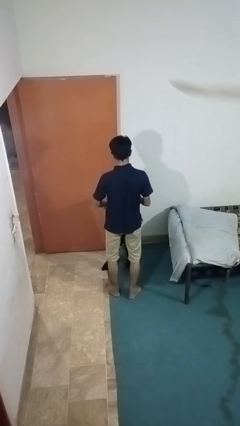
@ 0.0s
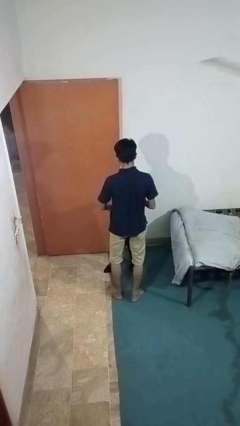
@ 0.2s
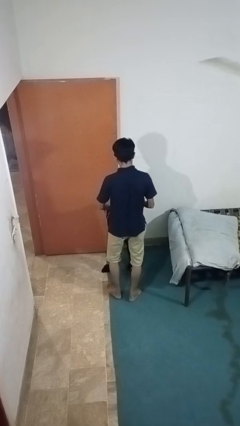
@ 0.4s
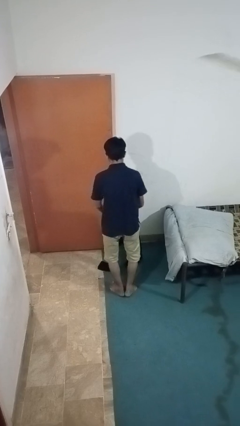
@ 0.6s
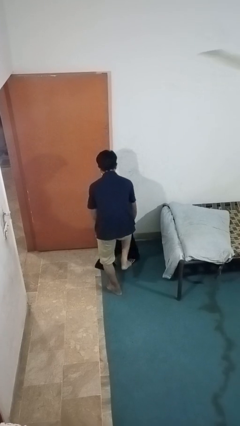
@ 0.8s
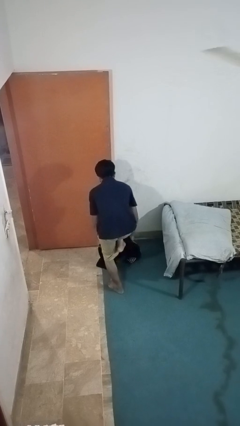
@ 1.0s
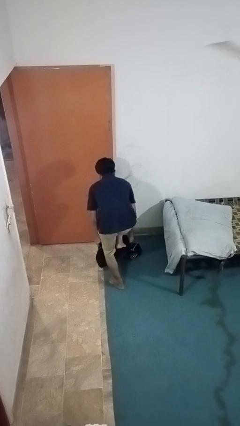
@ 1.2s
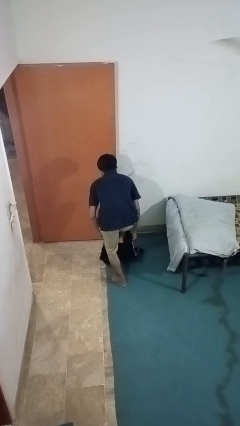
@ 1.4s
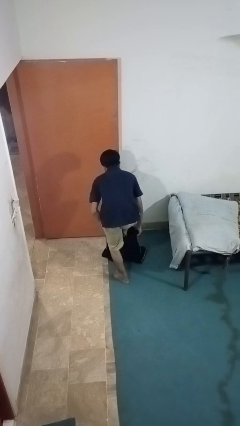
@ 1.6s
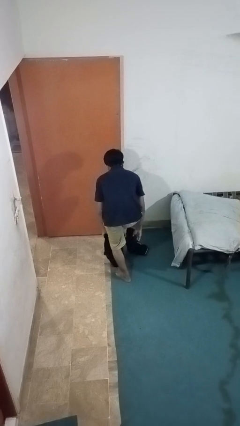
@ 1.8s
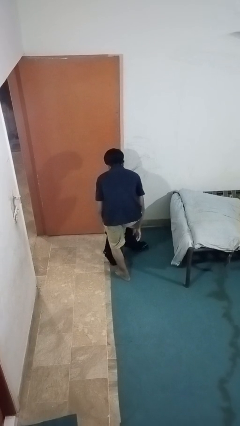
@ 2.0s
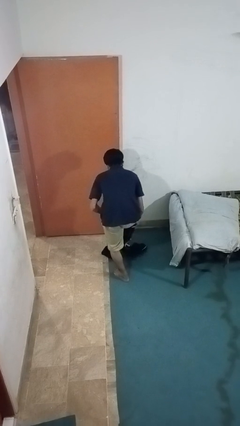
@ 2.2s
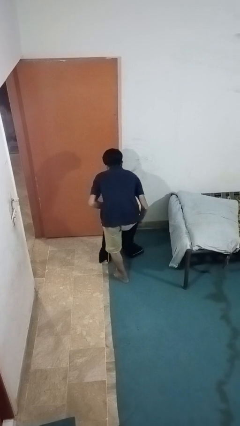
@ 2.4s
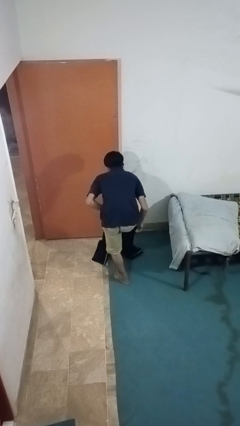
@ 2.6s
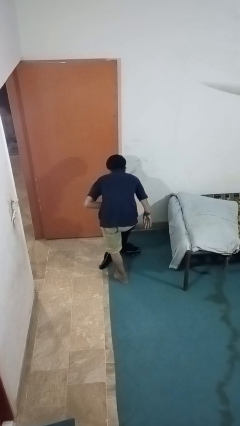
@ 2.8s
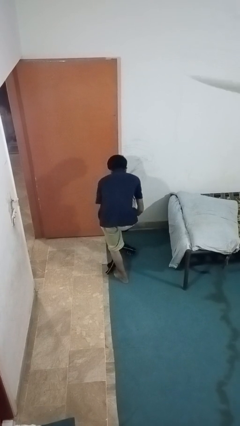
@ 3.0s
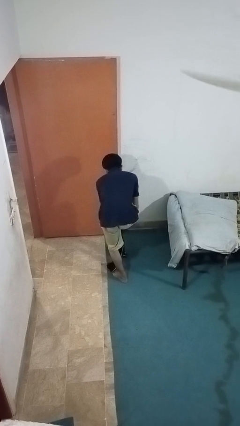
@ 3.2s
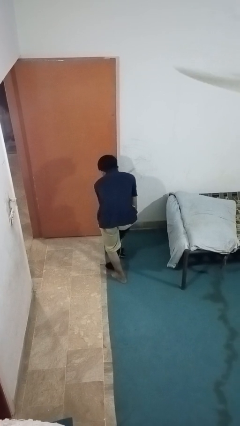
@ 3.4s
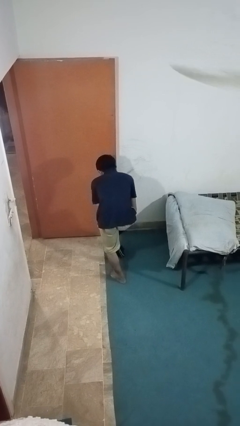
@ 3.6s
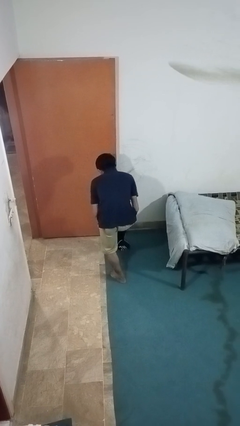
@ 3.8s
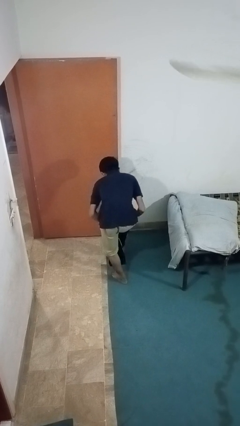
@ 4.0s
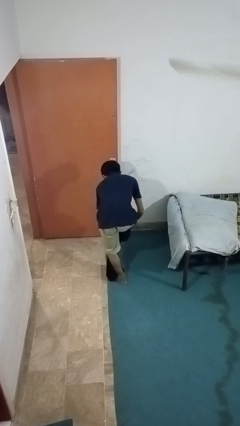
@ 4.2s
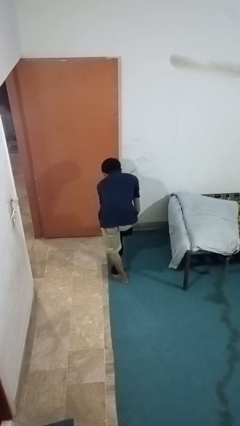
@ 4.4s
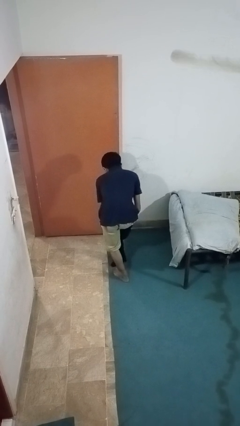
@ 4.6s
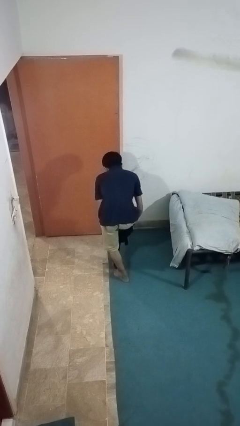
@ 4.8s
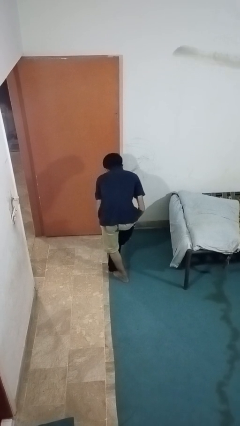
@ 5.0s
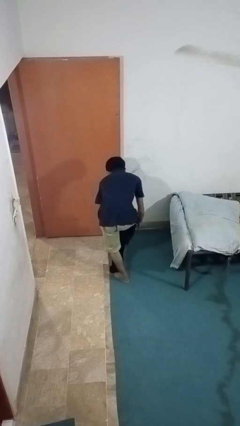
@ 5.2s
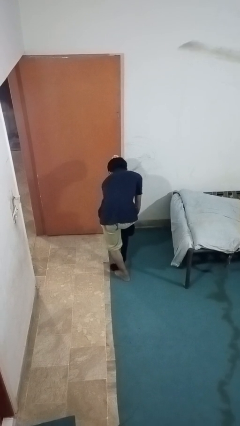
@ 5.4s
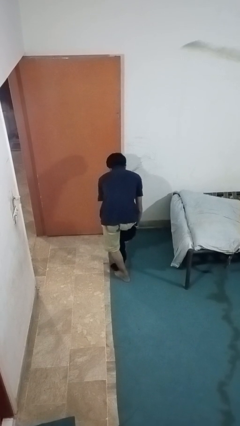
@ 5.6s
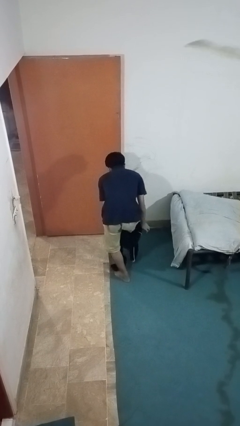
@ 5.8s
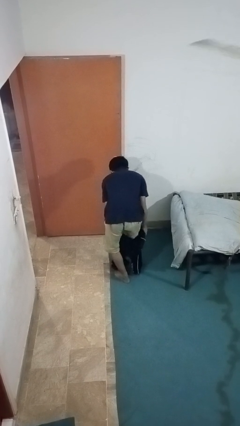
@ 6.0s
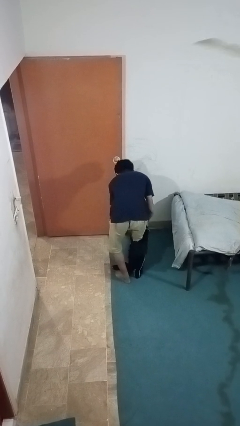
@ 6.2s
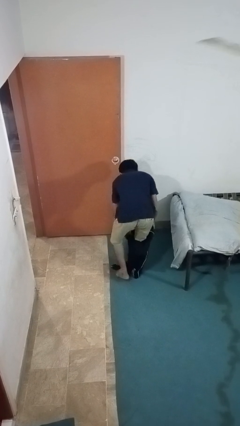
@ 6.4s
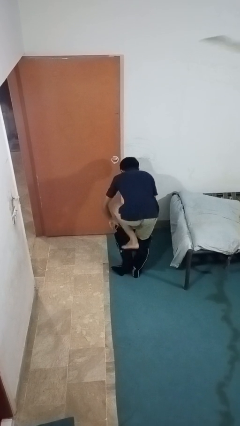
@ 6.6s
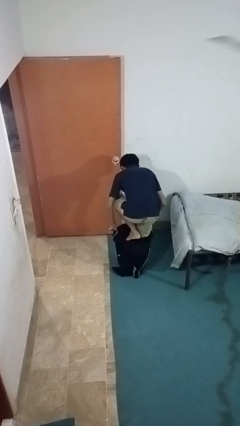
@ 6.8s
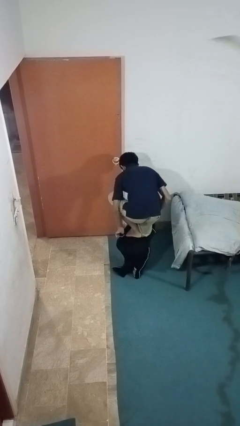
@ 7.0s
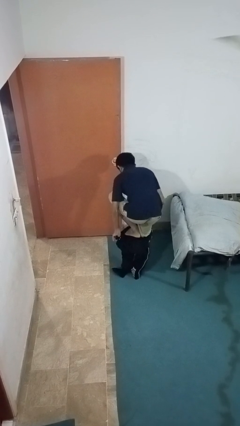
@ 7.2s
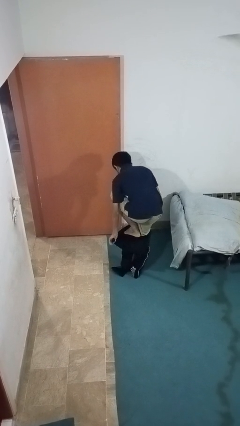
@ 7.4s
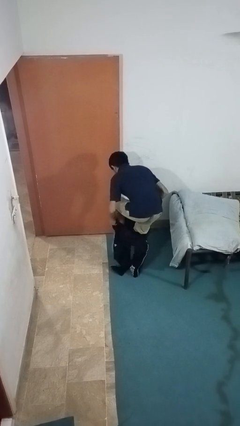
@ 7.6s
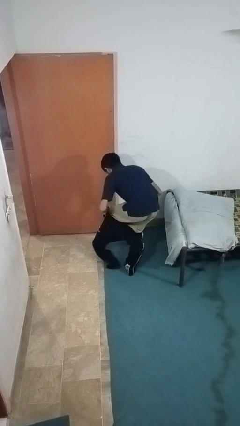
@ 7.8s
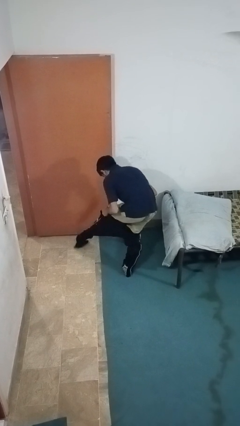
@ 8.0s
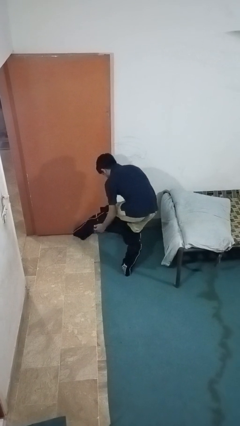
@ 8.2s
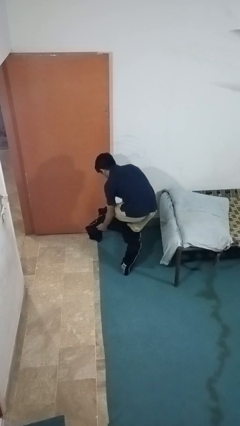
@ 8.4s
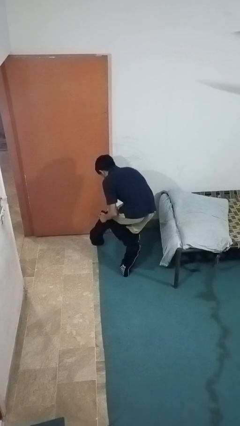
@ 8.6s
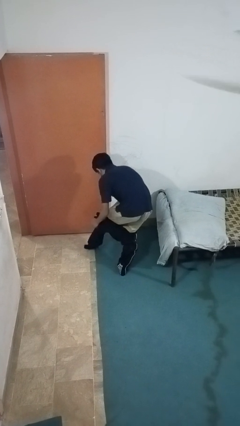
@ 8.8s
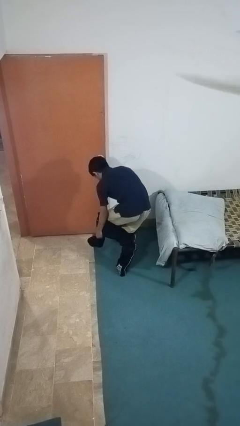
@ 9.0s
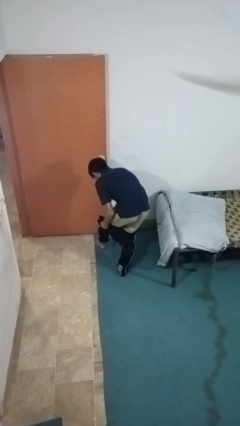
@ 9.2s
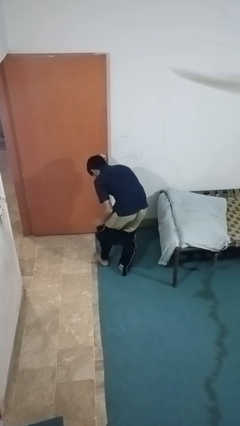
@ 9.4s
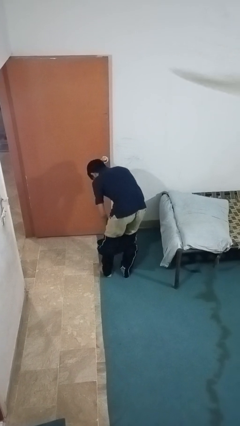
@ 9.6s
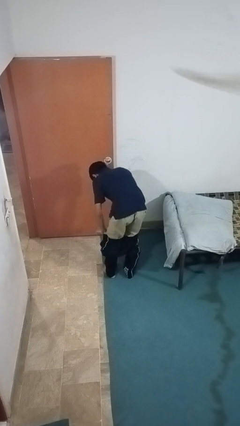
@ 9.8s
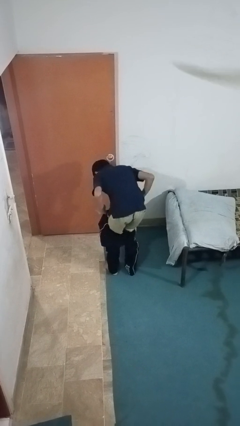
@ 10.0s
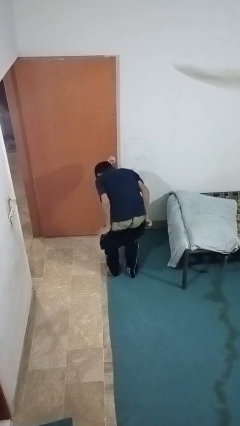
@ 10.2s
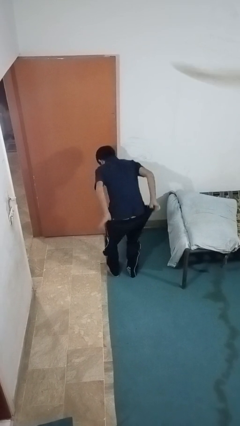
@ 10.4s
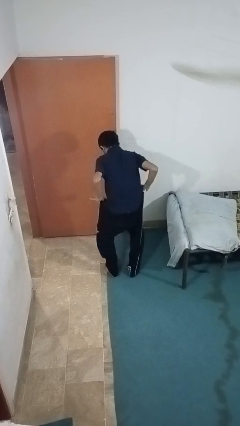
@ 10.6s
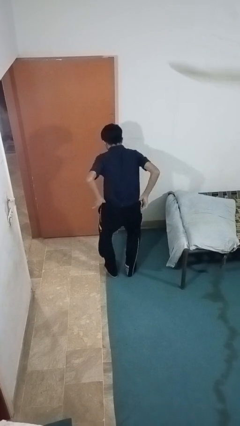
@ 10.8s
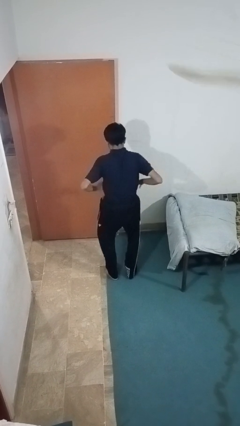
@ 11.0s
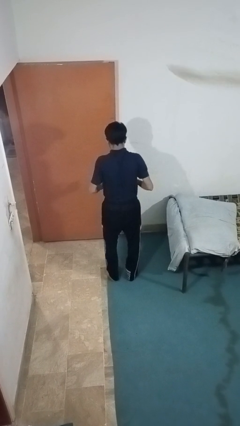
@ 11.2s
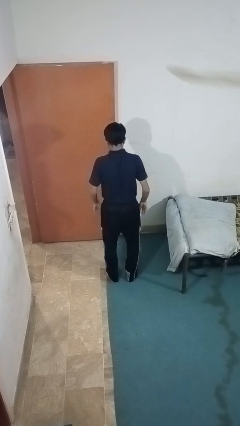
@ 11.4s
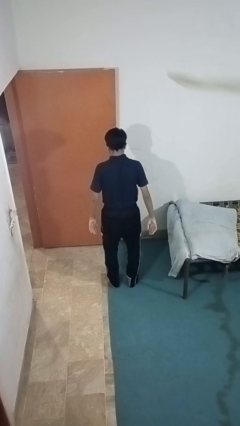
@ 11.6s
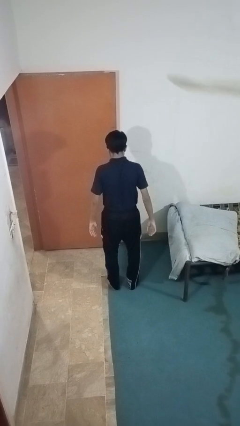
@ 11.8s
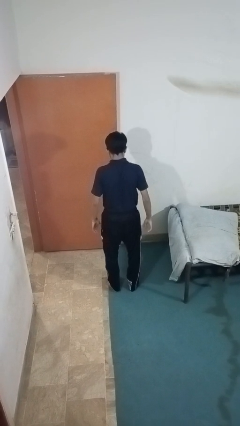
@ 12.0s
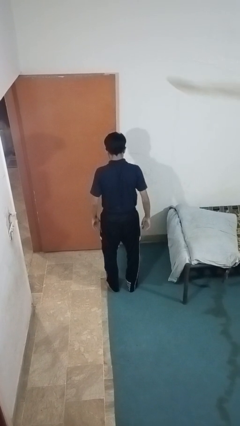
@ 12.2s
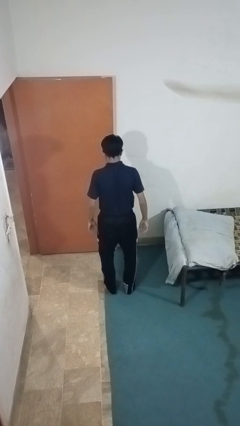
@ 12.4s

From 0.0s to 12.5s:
person puts on pants

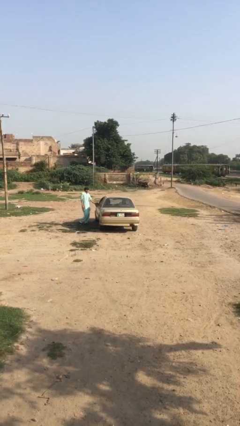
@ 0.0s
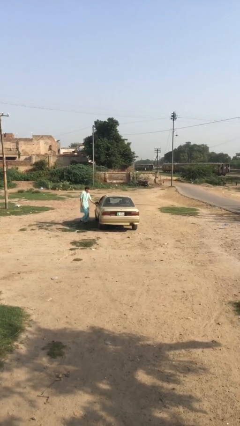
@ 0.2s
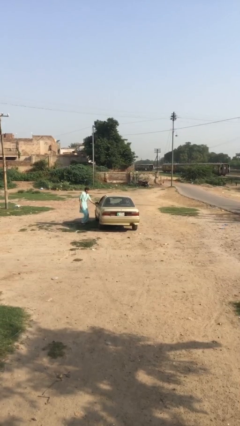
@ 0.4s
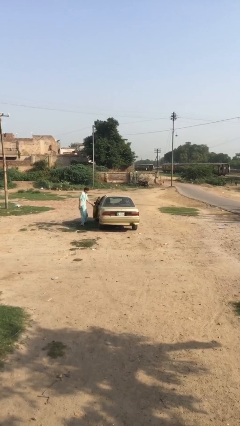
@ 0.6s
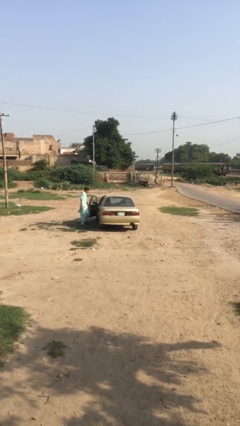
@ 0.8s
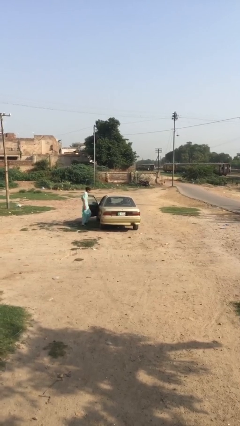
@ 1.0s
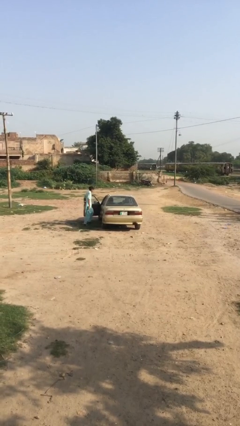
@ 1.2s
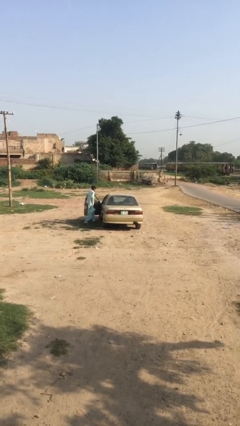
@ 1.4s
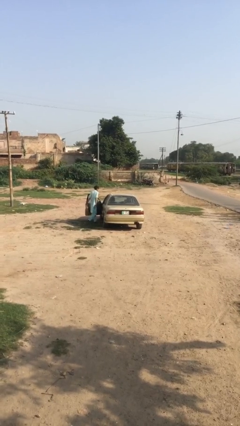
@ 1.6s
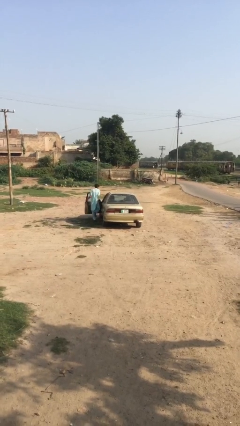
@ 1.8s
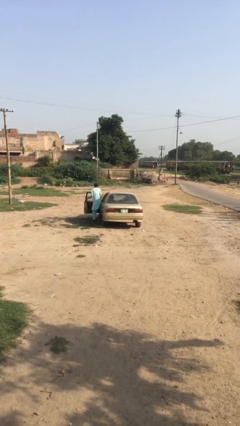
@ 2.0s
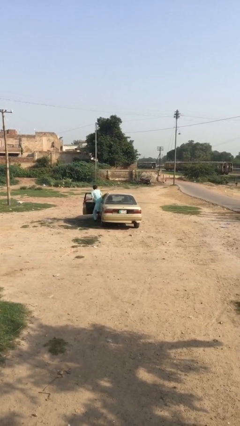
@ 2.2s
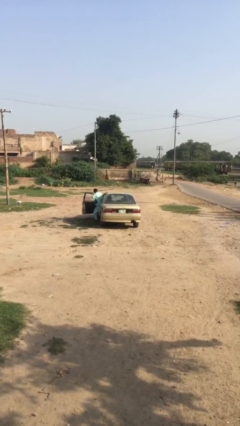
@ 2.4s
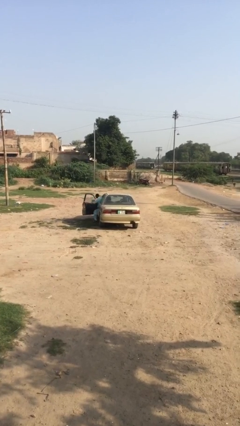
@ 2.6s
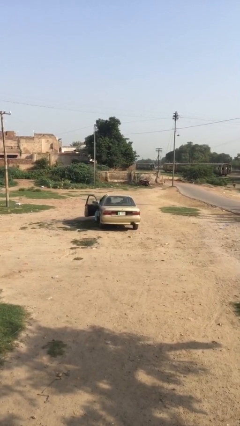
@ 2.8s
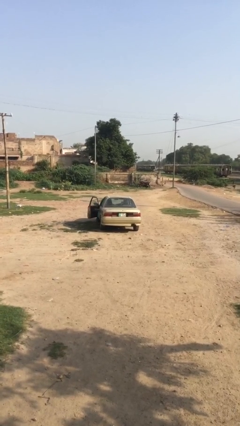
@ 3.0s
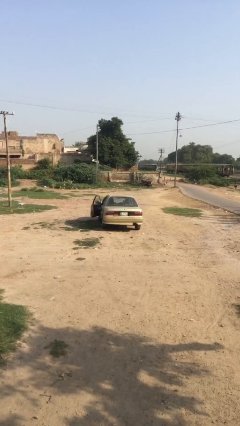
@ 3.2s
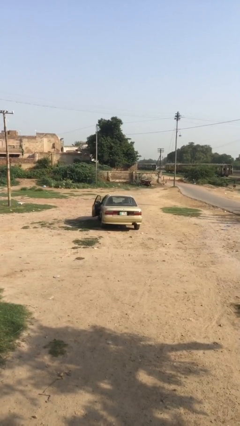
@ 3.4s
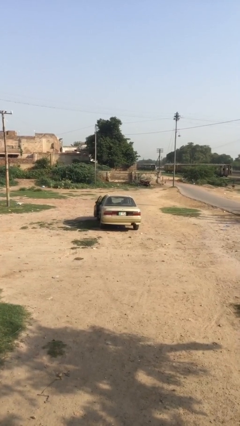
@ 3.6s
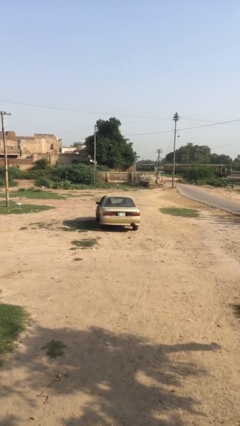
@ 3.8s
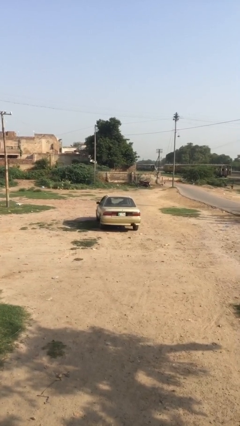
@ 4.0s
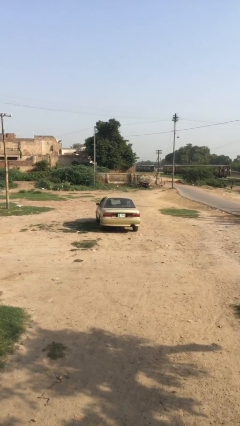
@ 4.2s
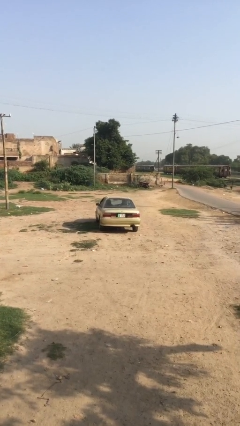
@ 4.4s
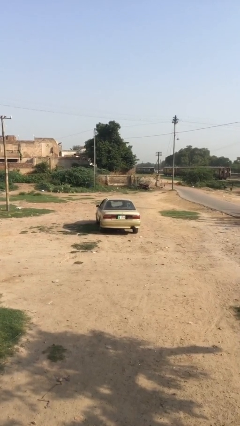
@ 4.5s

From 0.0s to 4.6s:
car picks up person

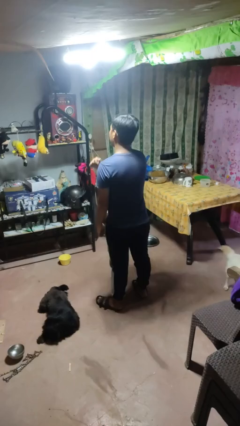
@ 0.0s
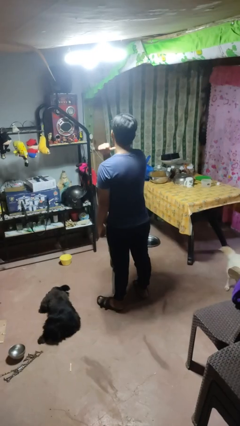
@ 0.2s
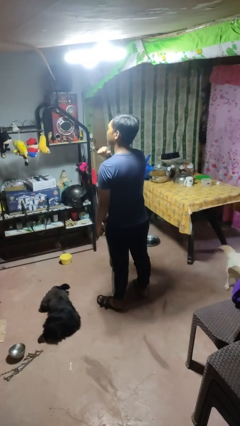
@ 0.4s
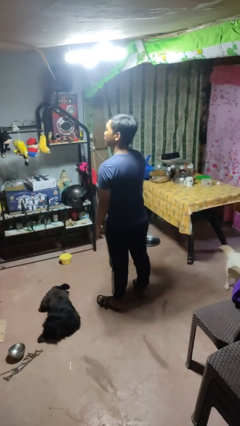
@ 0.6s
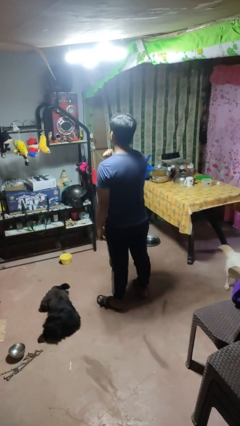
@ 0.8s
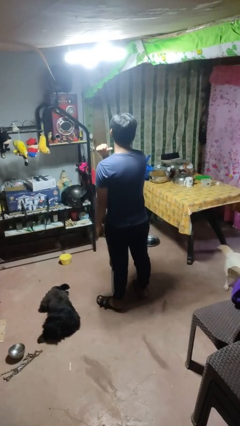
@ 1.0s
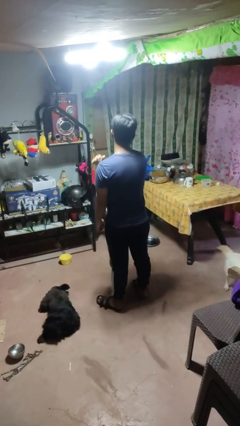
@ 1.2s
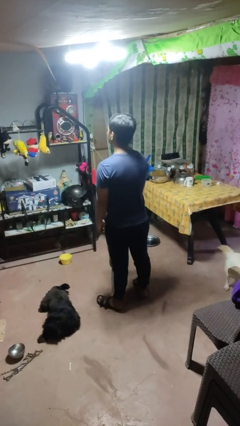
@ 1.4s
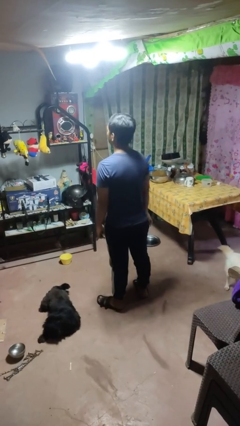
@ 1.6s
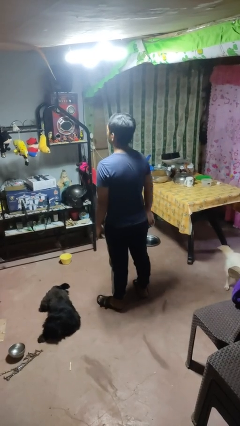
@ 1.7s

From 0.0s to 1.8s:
person gestures cut
